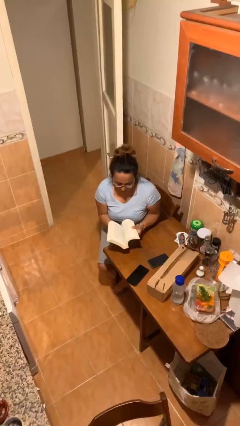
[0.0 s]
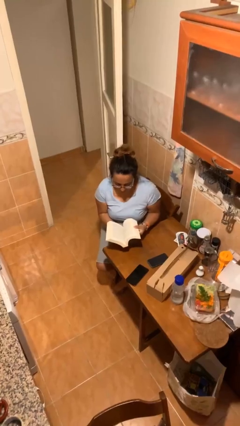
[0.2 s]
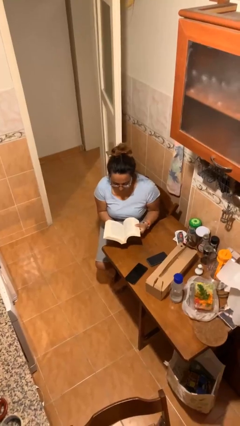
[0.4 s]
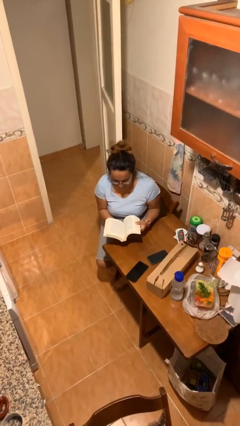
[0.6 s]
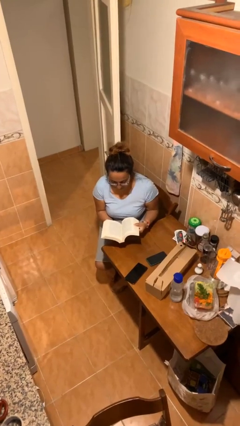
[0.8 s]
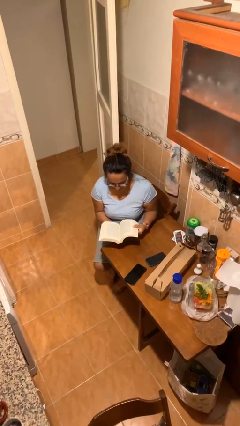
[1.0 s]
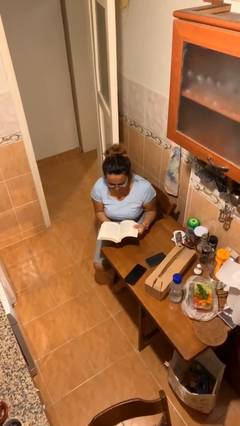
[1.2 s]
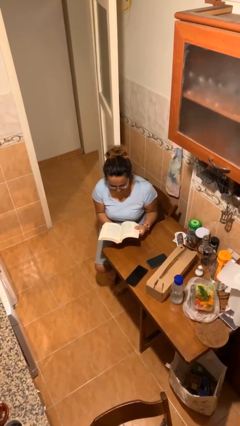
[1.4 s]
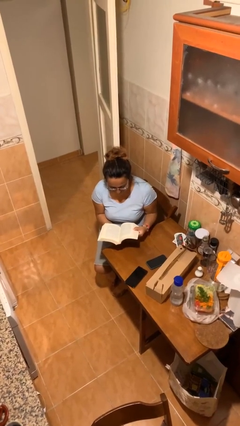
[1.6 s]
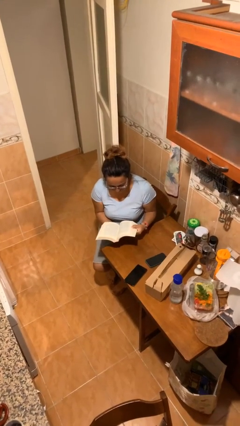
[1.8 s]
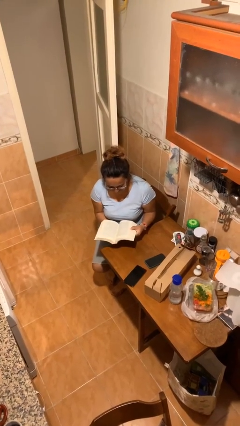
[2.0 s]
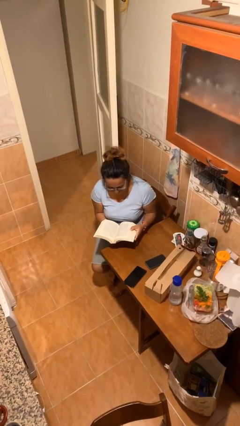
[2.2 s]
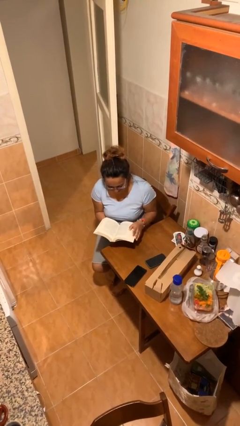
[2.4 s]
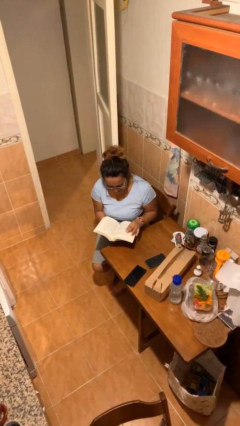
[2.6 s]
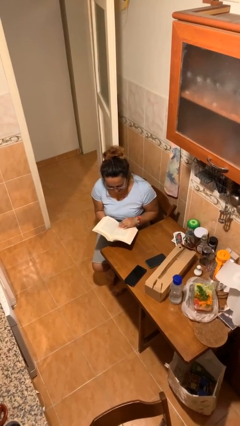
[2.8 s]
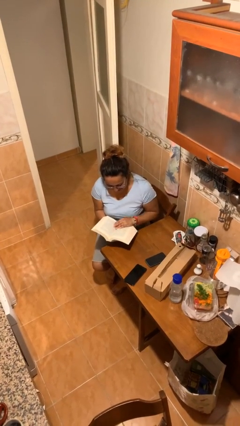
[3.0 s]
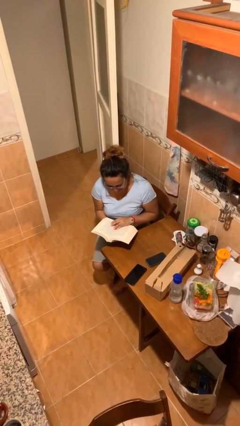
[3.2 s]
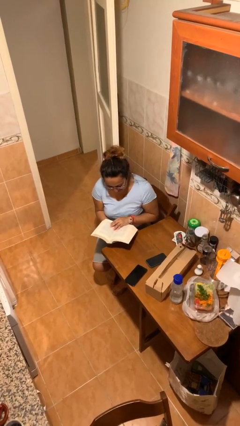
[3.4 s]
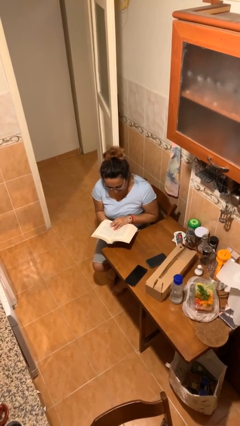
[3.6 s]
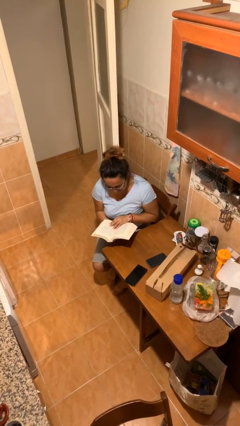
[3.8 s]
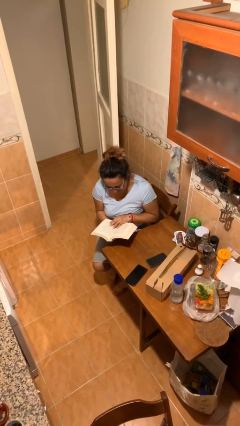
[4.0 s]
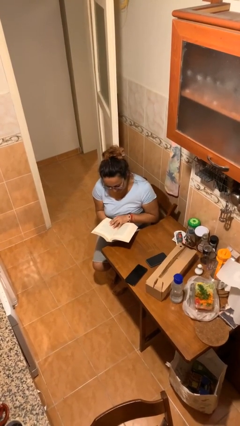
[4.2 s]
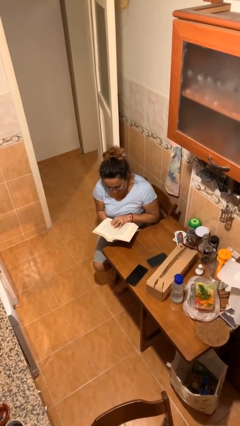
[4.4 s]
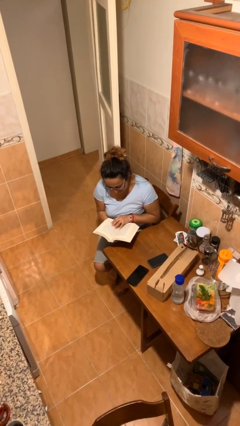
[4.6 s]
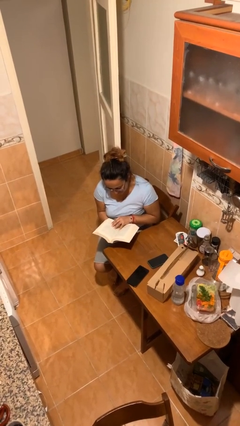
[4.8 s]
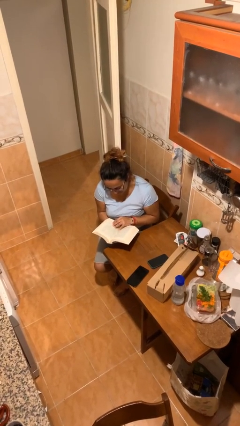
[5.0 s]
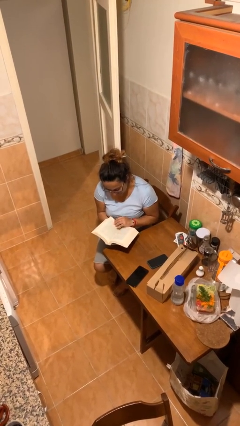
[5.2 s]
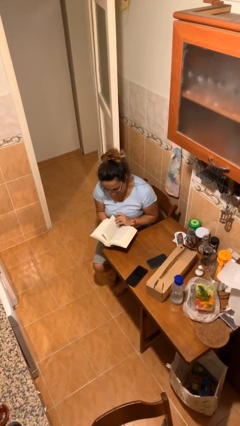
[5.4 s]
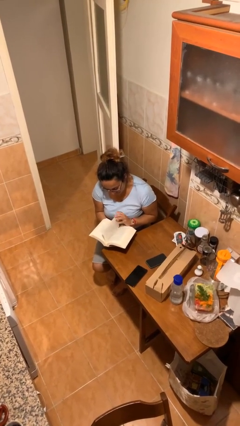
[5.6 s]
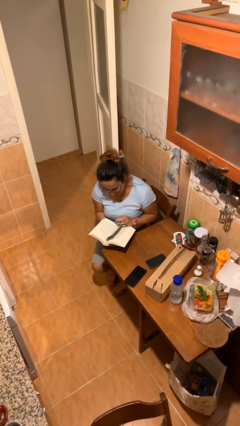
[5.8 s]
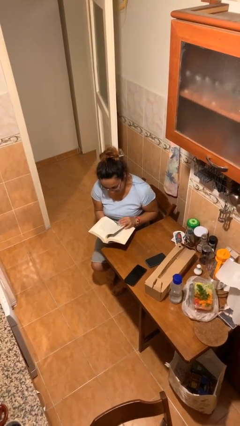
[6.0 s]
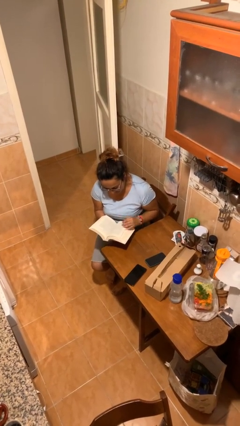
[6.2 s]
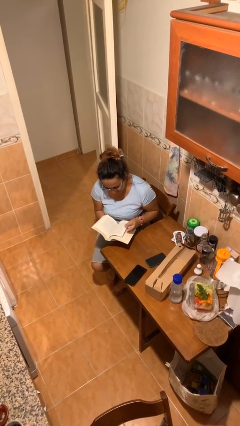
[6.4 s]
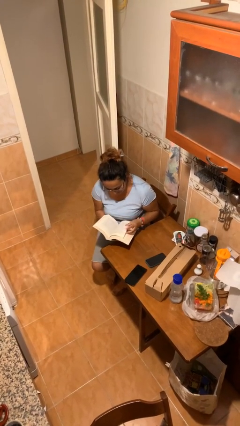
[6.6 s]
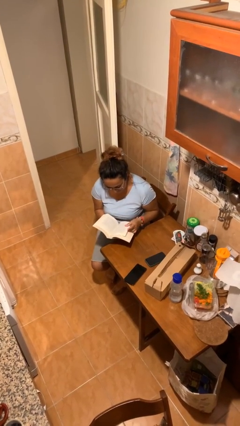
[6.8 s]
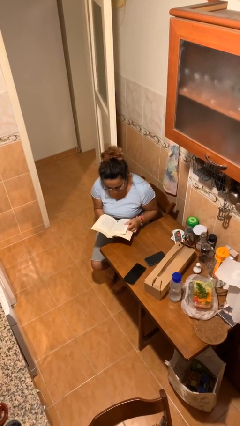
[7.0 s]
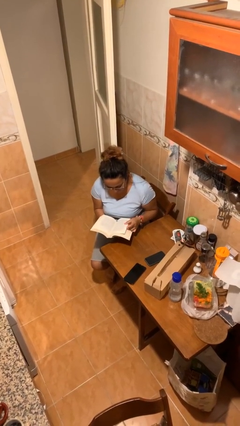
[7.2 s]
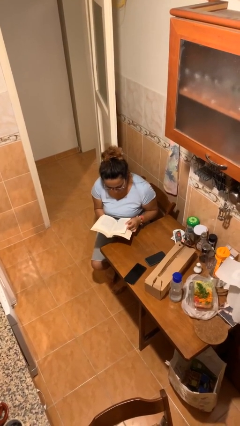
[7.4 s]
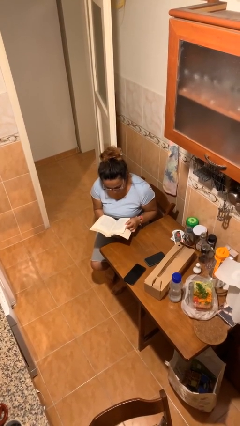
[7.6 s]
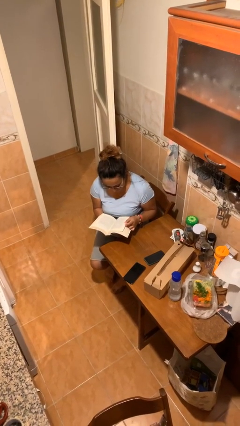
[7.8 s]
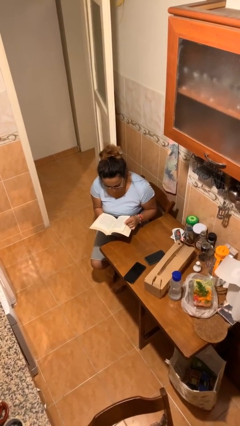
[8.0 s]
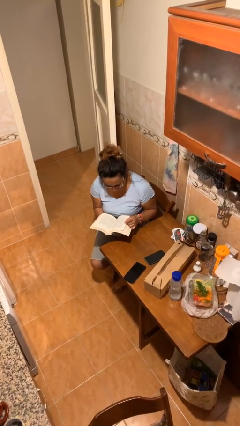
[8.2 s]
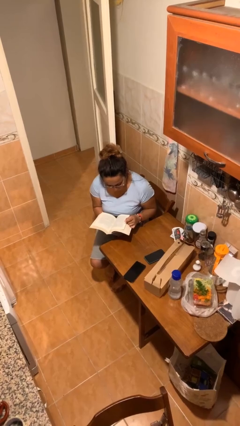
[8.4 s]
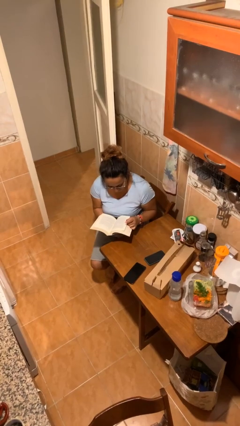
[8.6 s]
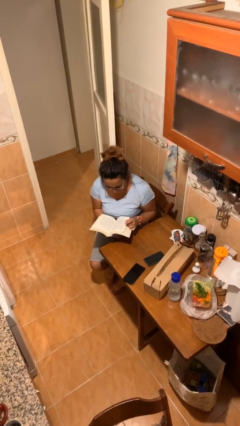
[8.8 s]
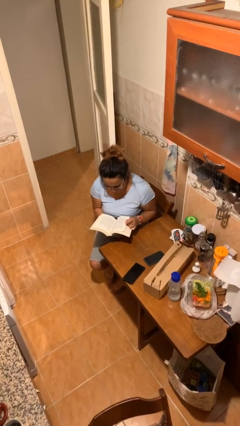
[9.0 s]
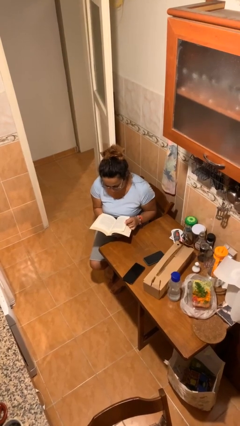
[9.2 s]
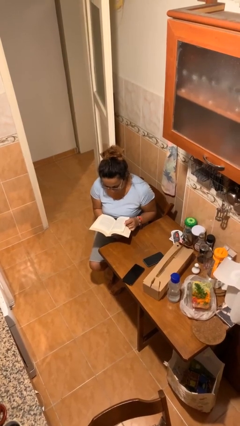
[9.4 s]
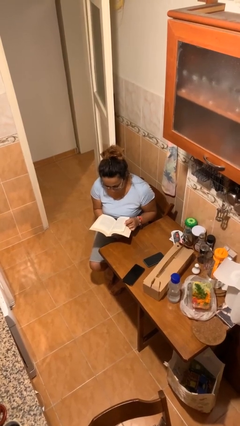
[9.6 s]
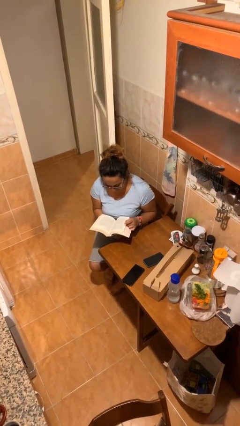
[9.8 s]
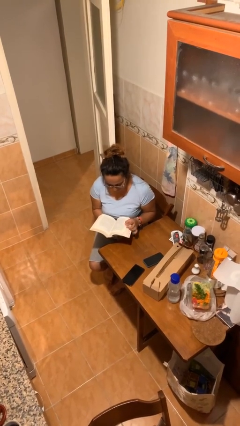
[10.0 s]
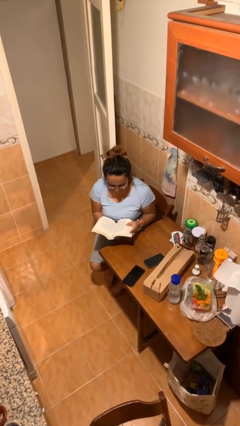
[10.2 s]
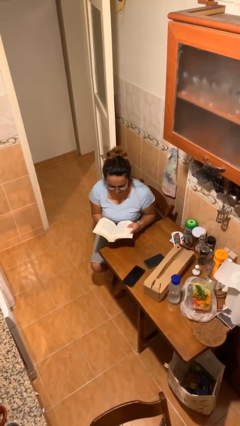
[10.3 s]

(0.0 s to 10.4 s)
person reads document

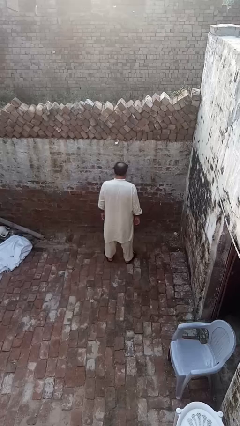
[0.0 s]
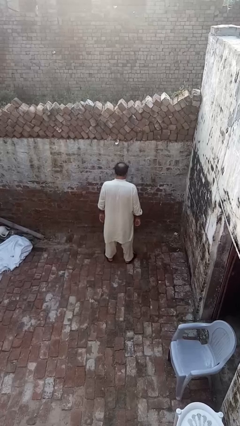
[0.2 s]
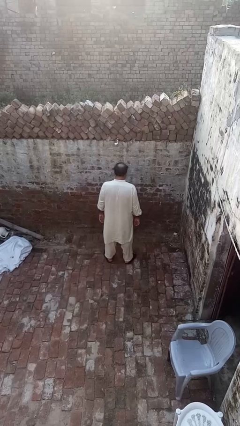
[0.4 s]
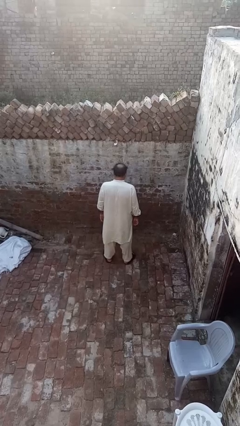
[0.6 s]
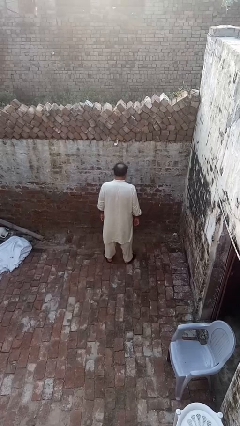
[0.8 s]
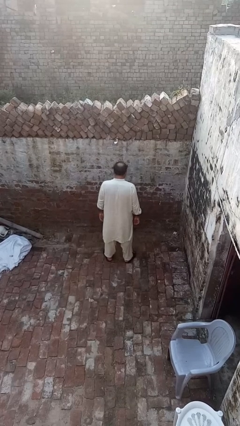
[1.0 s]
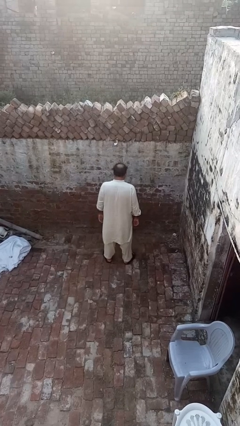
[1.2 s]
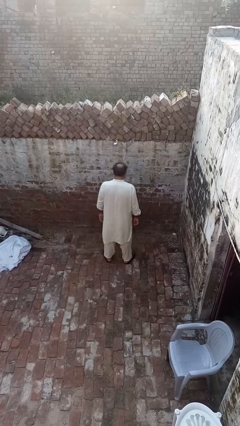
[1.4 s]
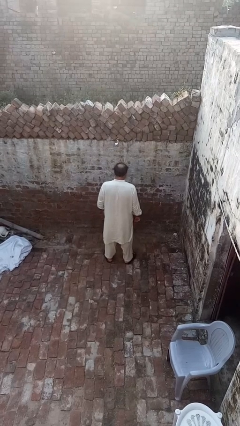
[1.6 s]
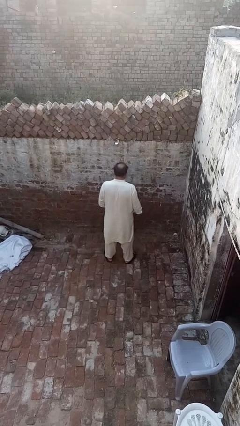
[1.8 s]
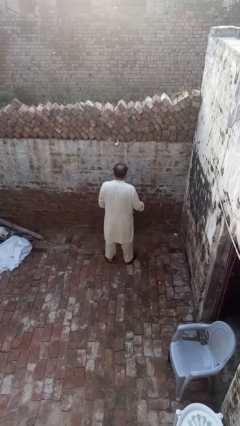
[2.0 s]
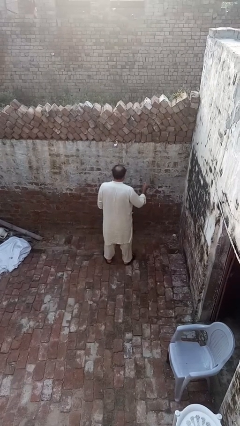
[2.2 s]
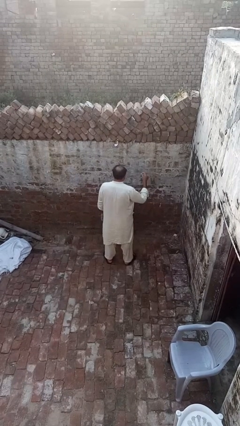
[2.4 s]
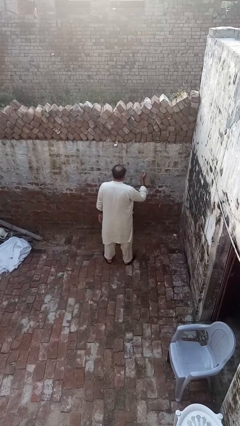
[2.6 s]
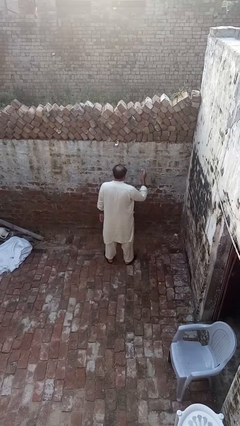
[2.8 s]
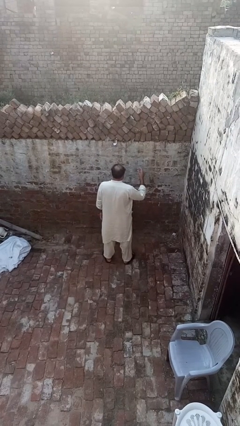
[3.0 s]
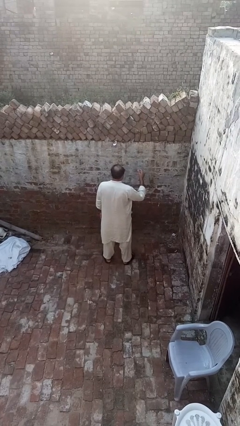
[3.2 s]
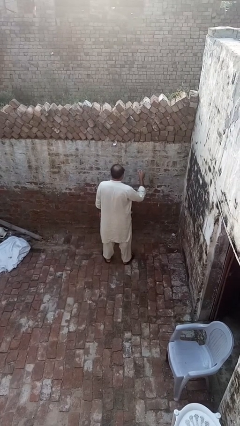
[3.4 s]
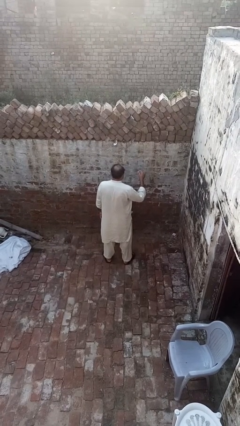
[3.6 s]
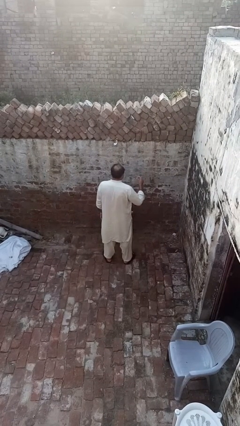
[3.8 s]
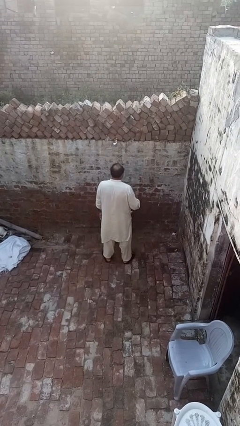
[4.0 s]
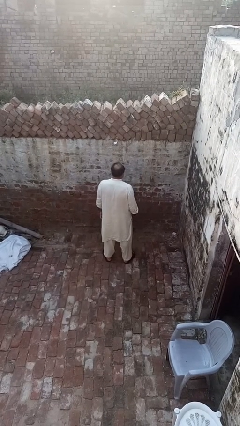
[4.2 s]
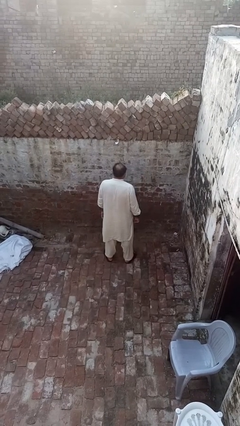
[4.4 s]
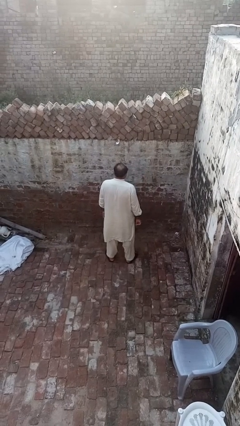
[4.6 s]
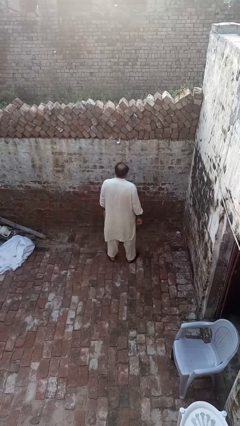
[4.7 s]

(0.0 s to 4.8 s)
person snaps fingers

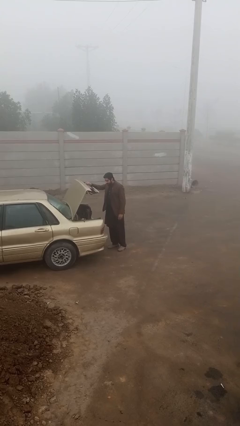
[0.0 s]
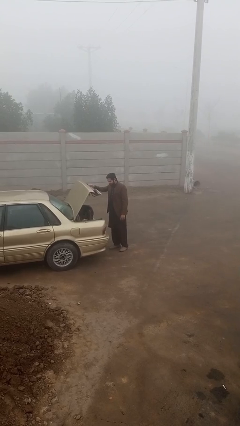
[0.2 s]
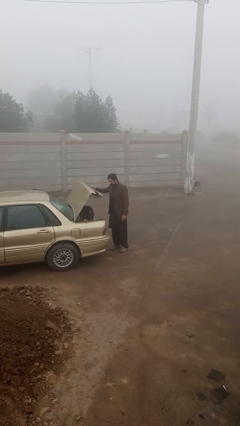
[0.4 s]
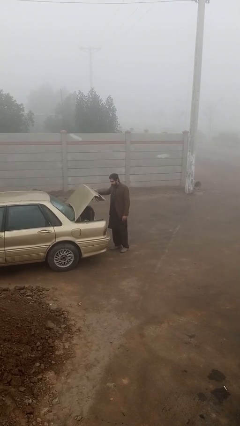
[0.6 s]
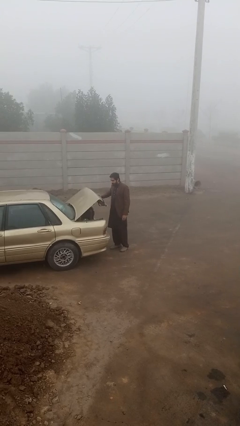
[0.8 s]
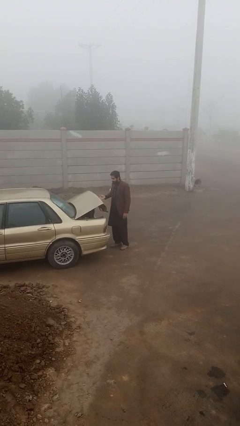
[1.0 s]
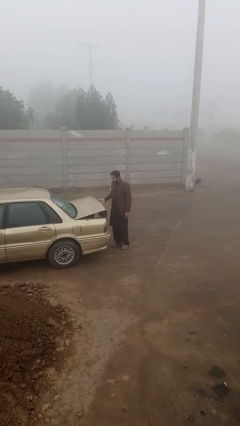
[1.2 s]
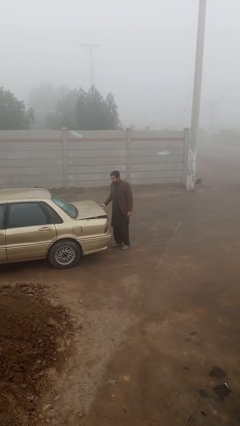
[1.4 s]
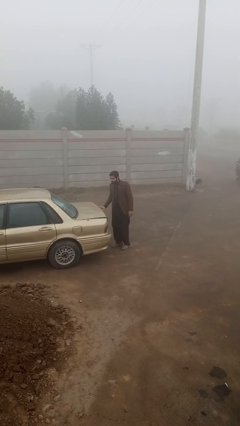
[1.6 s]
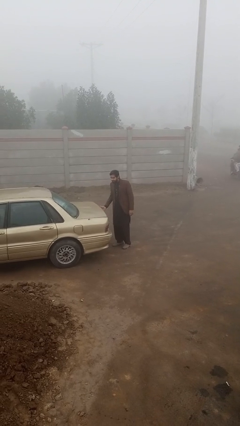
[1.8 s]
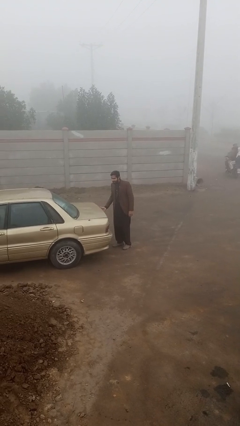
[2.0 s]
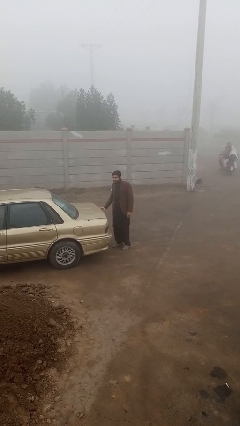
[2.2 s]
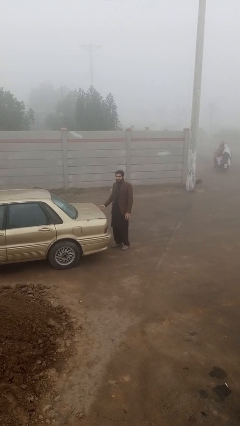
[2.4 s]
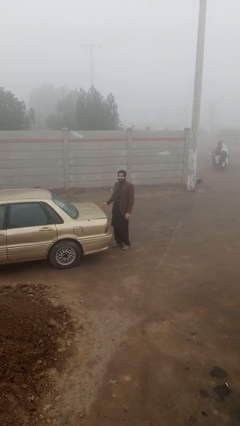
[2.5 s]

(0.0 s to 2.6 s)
person closes car trunk

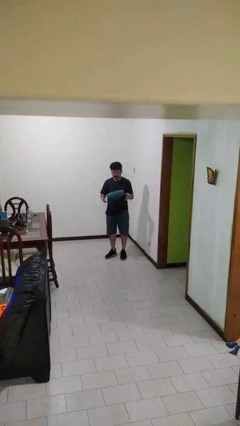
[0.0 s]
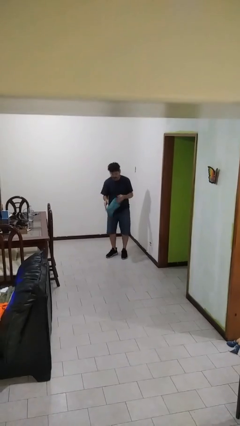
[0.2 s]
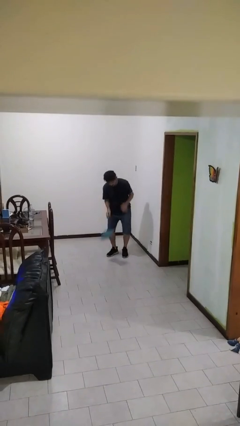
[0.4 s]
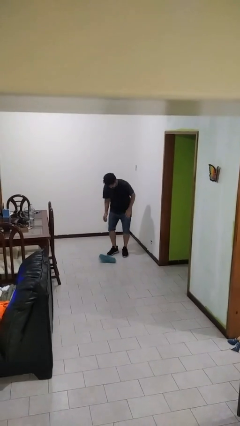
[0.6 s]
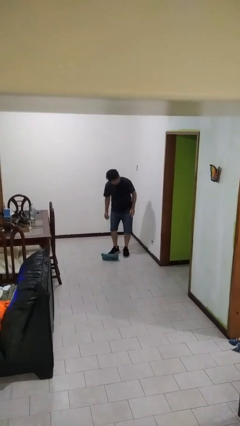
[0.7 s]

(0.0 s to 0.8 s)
person drops object
